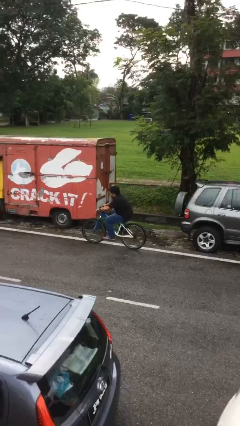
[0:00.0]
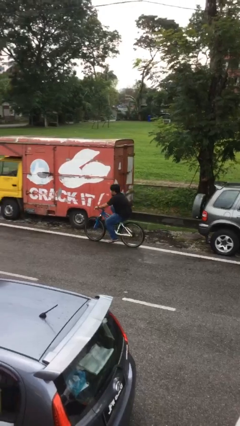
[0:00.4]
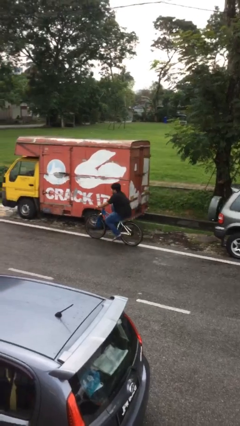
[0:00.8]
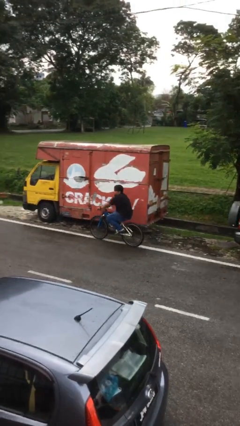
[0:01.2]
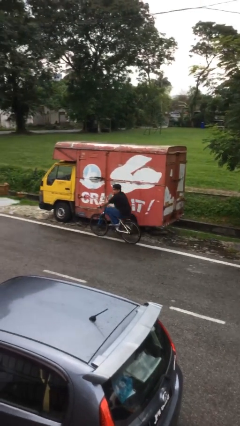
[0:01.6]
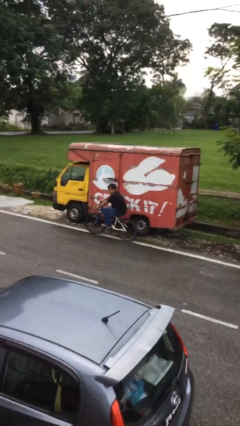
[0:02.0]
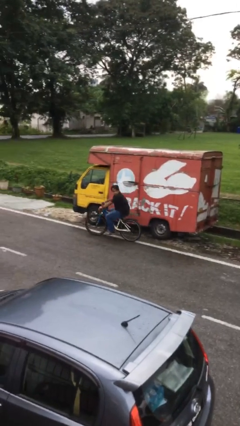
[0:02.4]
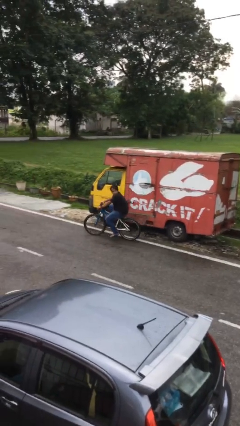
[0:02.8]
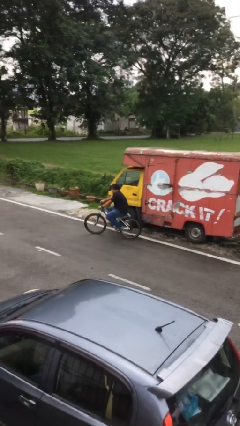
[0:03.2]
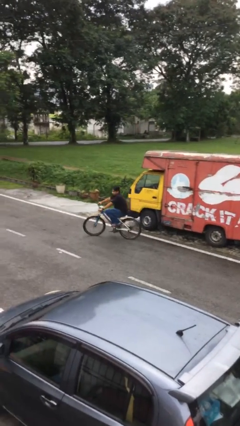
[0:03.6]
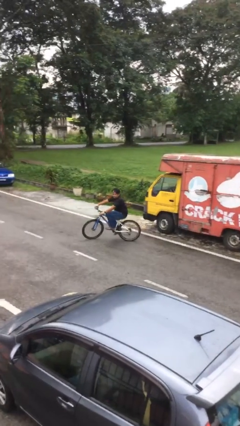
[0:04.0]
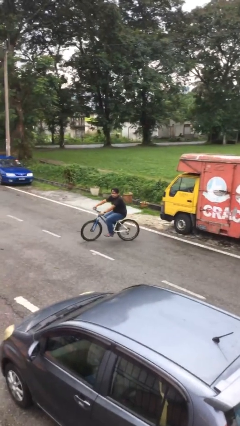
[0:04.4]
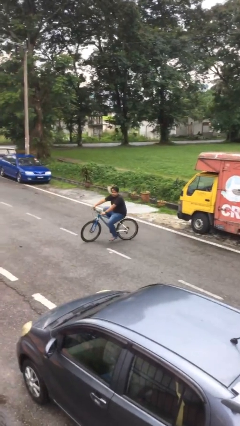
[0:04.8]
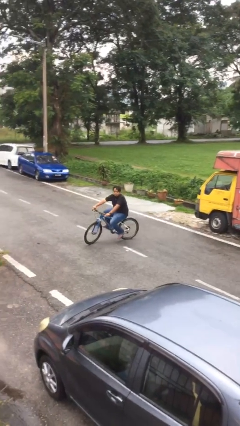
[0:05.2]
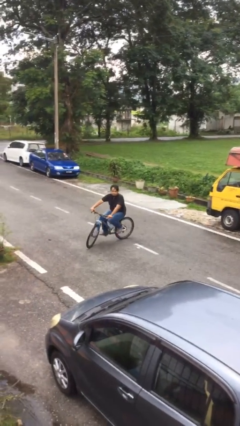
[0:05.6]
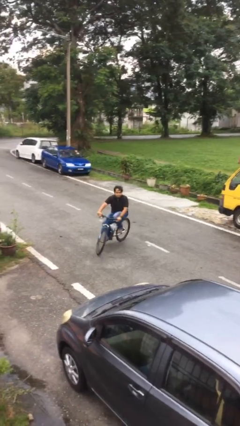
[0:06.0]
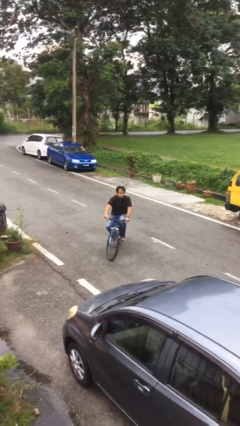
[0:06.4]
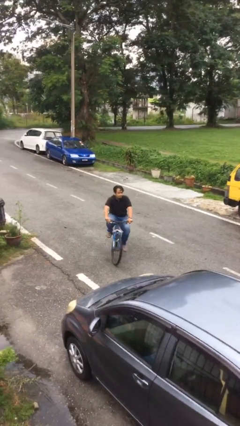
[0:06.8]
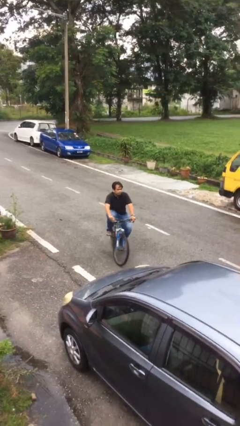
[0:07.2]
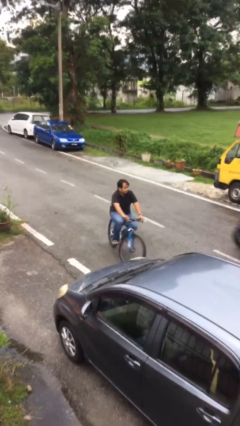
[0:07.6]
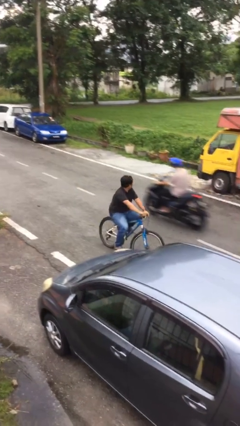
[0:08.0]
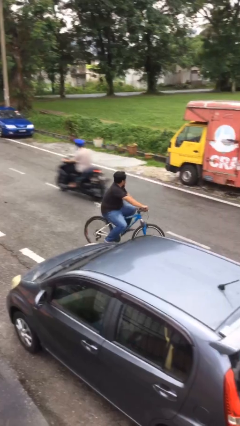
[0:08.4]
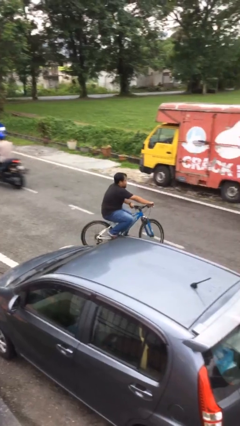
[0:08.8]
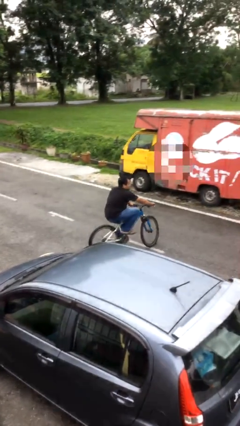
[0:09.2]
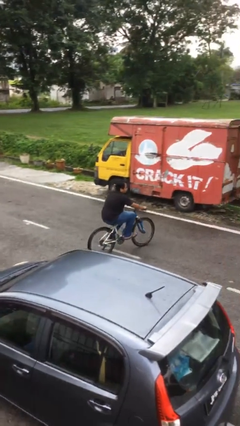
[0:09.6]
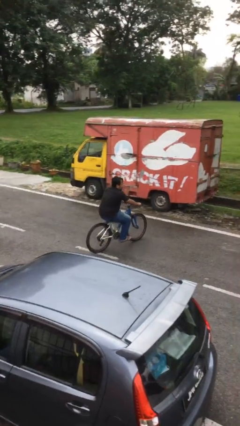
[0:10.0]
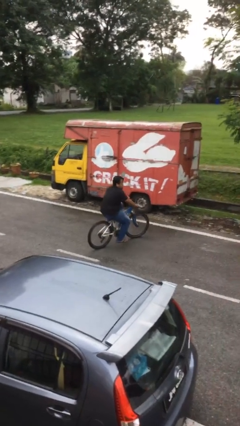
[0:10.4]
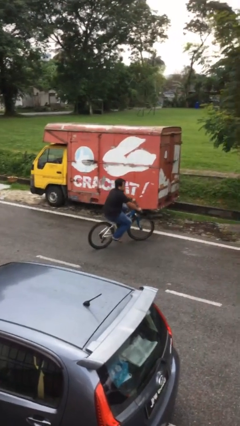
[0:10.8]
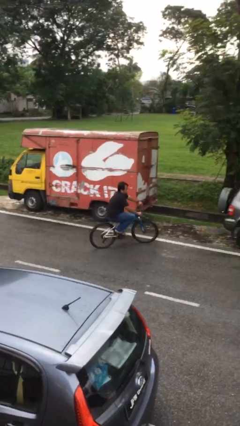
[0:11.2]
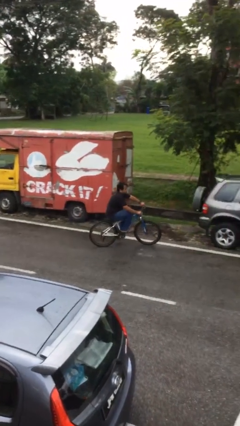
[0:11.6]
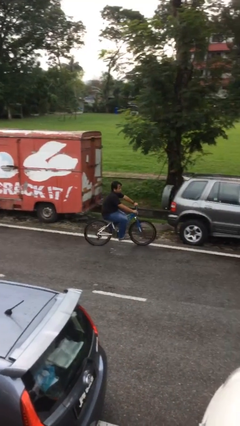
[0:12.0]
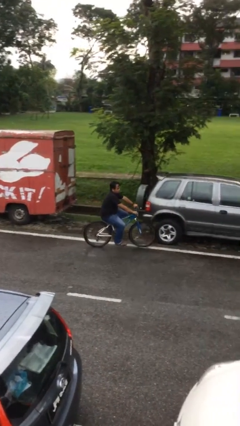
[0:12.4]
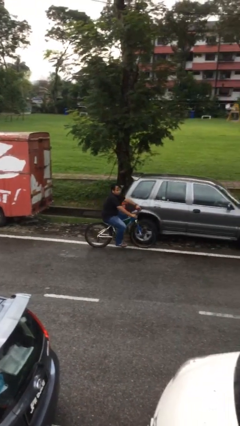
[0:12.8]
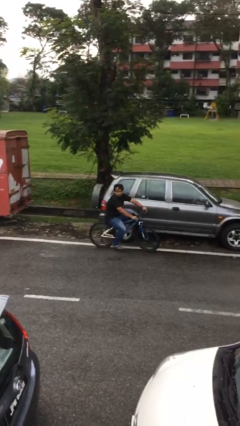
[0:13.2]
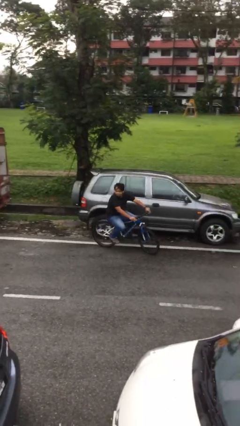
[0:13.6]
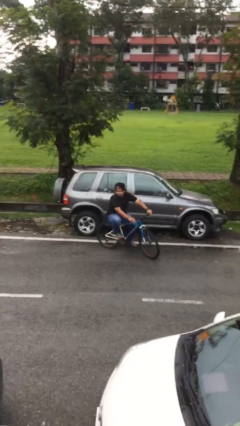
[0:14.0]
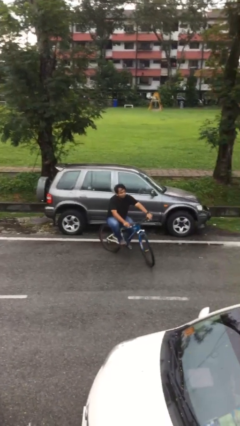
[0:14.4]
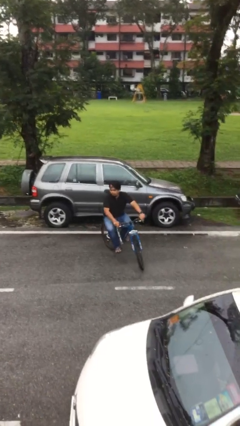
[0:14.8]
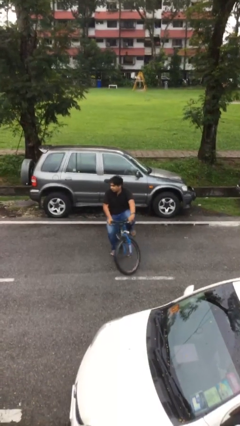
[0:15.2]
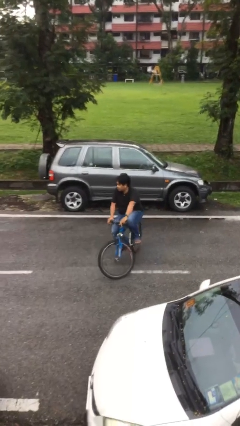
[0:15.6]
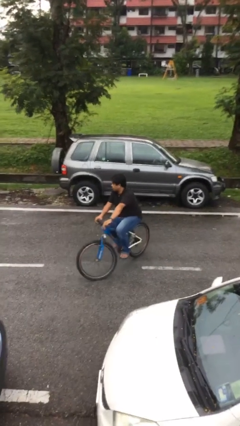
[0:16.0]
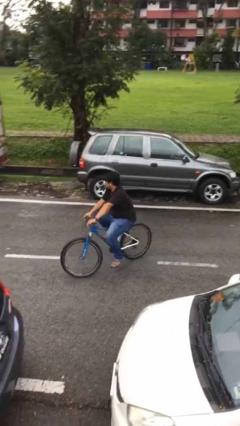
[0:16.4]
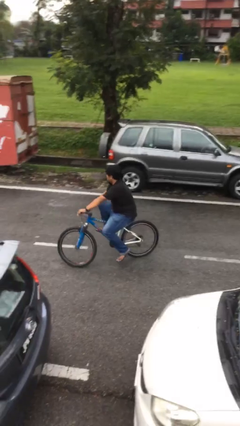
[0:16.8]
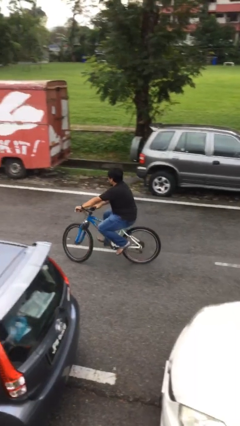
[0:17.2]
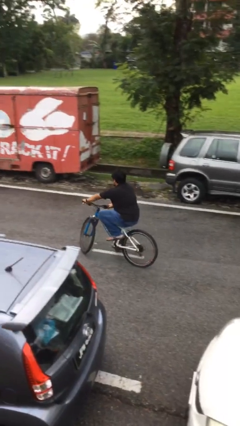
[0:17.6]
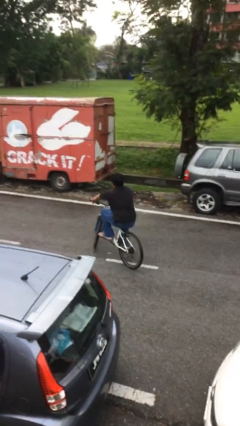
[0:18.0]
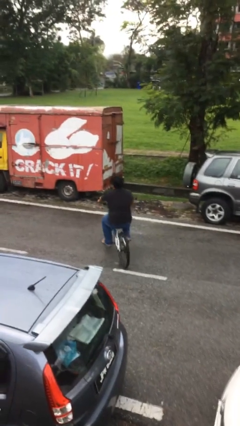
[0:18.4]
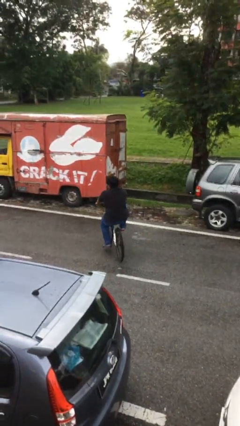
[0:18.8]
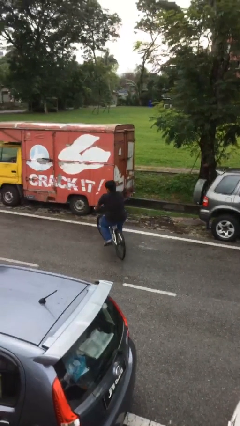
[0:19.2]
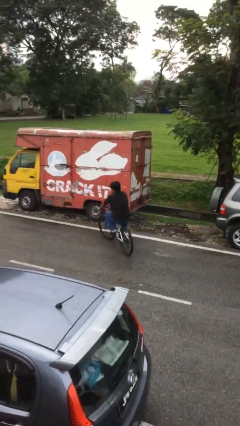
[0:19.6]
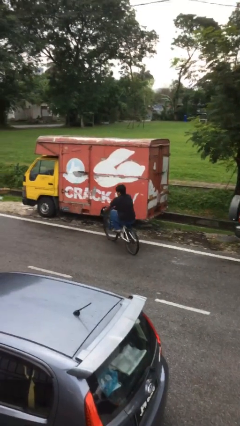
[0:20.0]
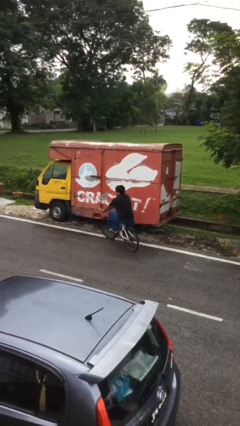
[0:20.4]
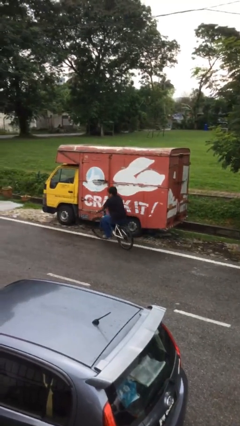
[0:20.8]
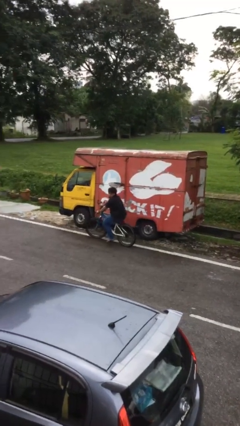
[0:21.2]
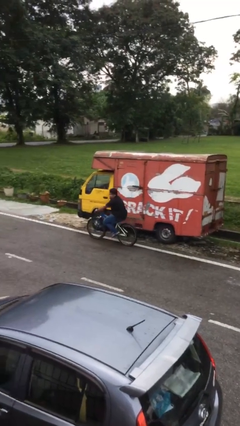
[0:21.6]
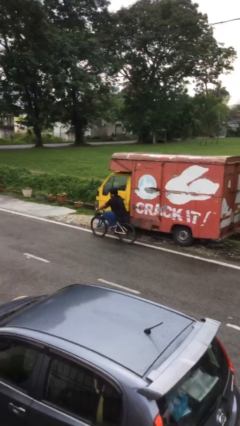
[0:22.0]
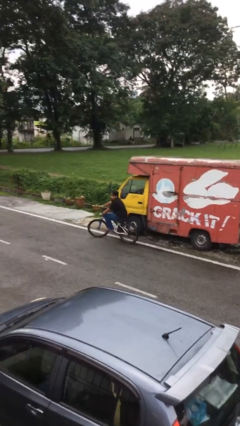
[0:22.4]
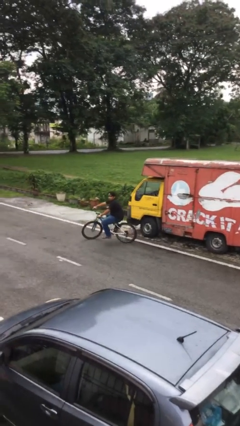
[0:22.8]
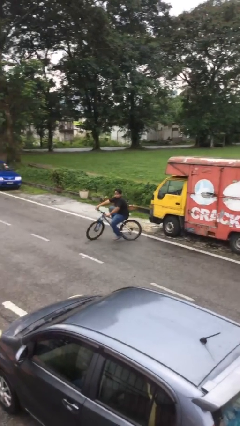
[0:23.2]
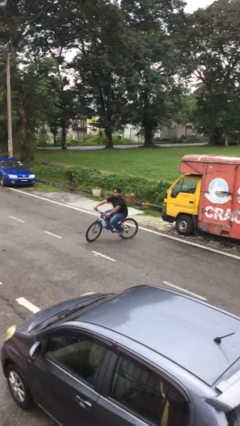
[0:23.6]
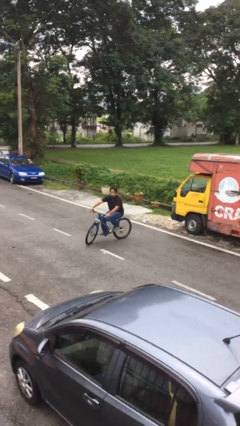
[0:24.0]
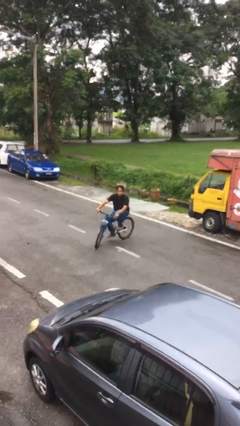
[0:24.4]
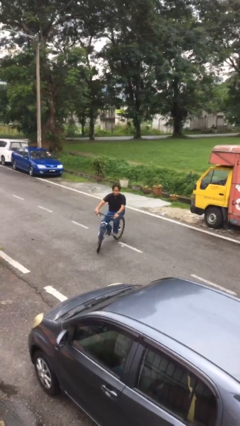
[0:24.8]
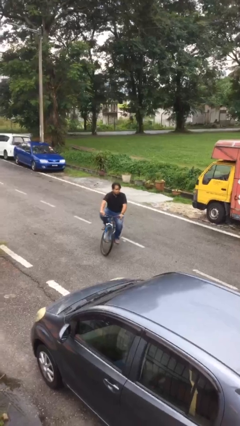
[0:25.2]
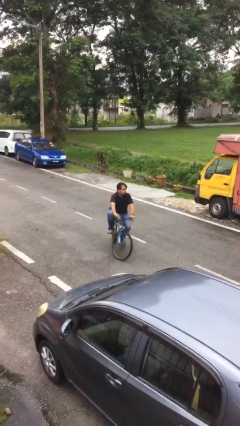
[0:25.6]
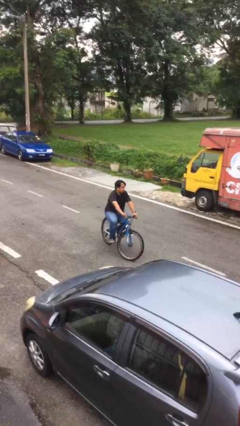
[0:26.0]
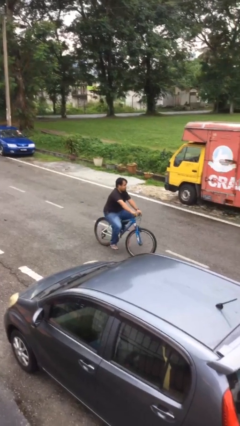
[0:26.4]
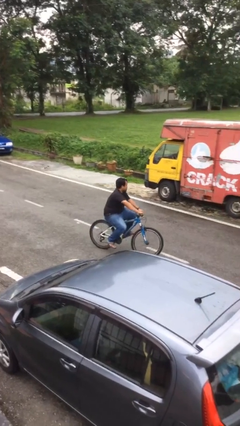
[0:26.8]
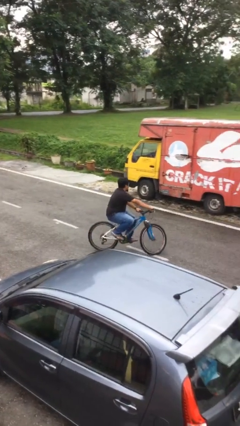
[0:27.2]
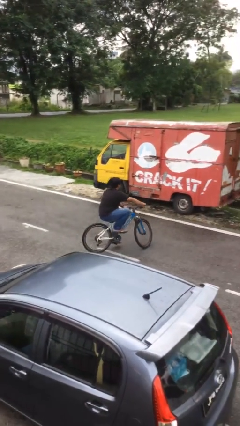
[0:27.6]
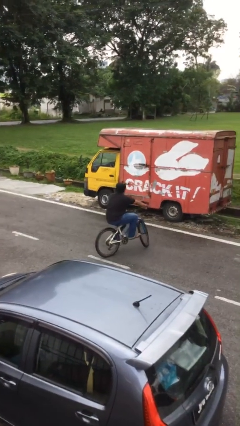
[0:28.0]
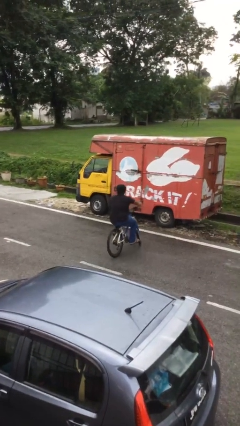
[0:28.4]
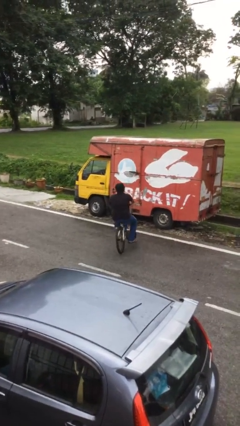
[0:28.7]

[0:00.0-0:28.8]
person rides bicycle

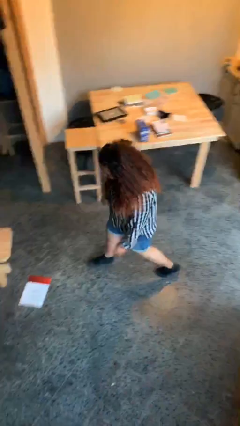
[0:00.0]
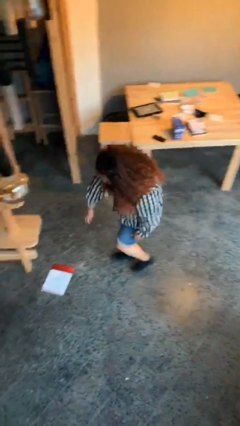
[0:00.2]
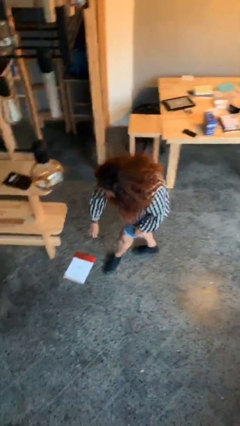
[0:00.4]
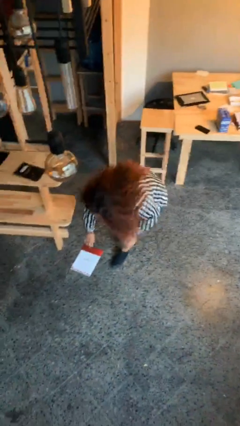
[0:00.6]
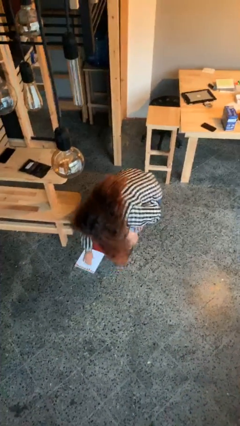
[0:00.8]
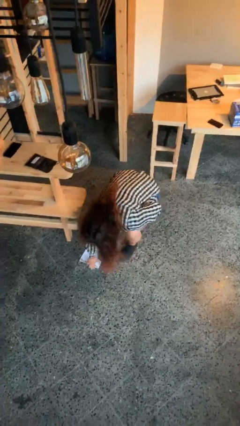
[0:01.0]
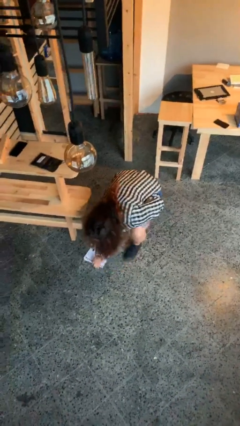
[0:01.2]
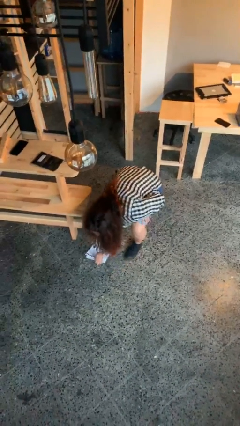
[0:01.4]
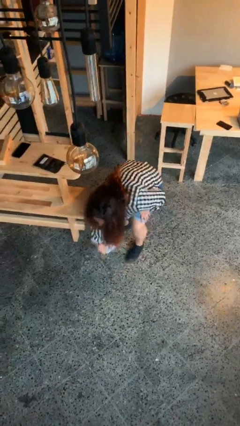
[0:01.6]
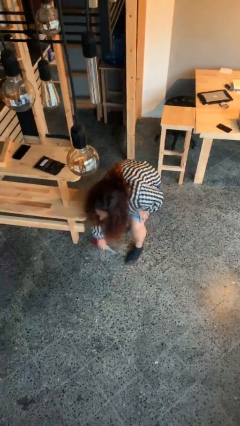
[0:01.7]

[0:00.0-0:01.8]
person picks up object from floor

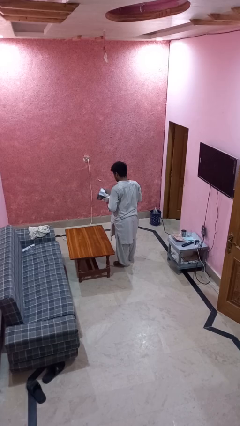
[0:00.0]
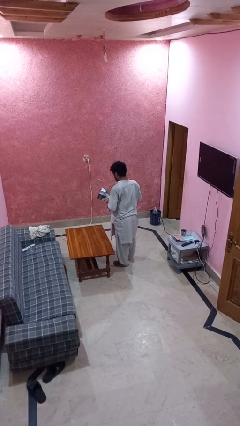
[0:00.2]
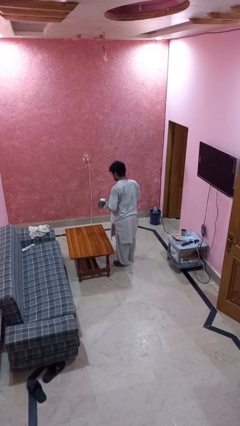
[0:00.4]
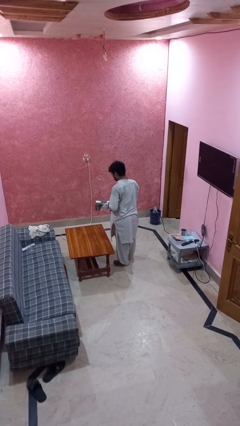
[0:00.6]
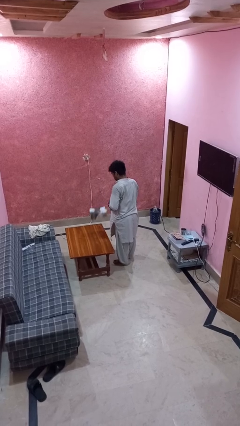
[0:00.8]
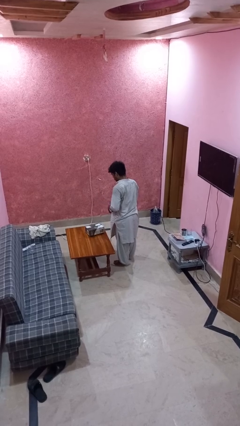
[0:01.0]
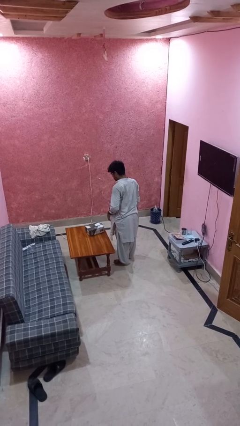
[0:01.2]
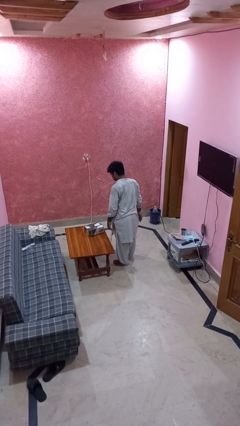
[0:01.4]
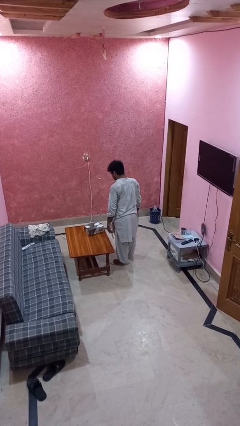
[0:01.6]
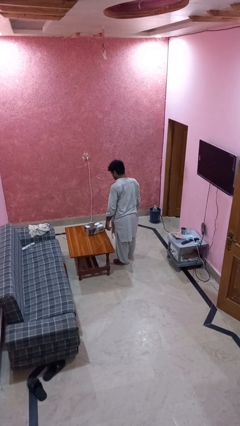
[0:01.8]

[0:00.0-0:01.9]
person throws object on table
